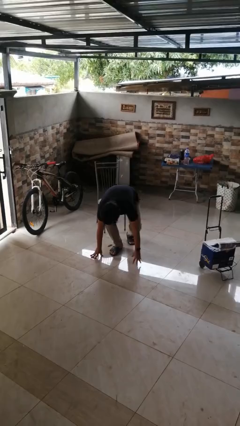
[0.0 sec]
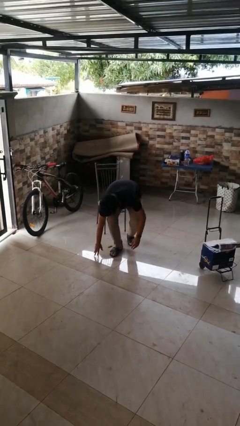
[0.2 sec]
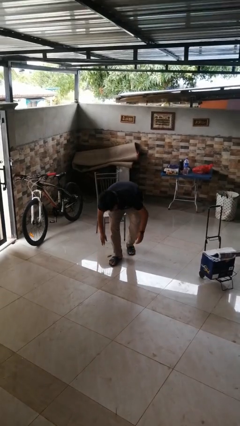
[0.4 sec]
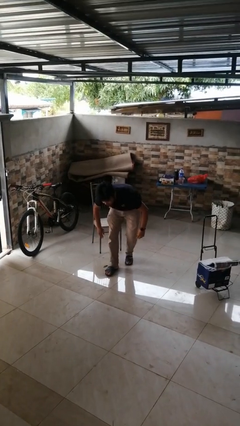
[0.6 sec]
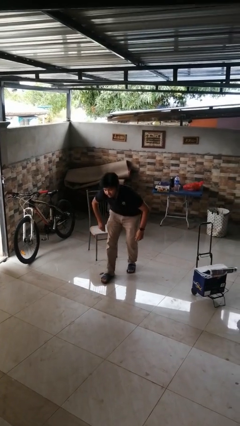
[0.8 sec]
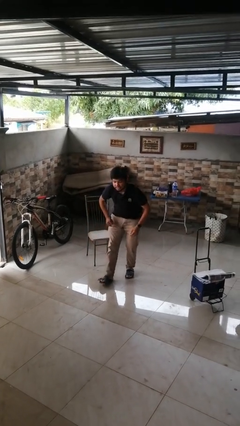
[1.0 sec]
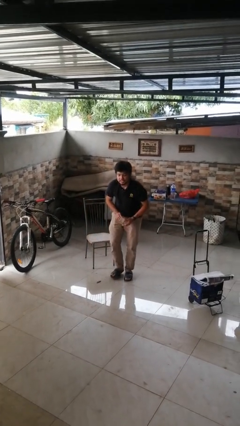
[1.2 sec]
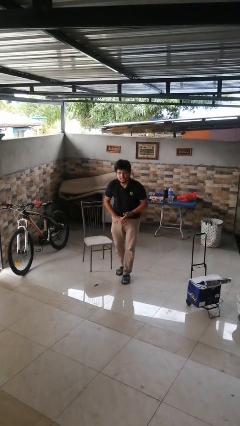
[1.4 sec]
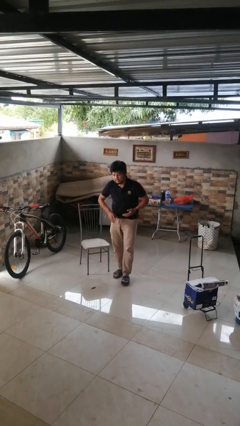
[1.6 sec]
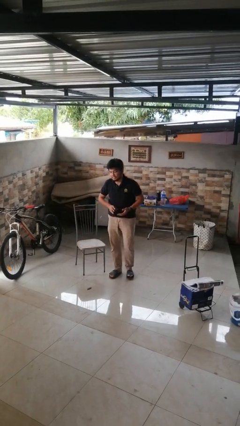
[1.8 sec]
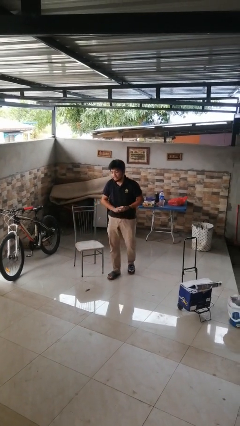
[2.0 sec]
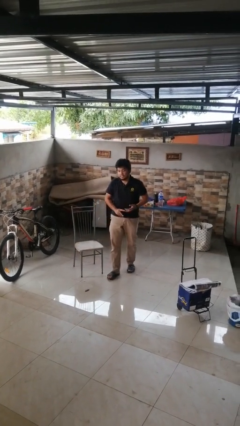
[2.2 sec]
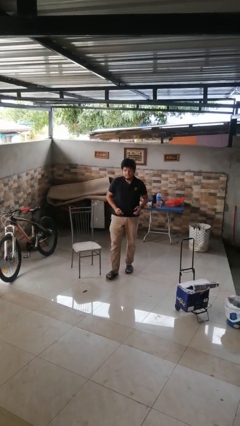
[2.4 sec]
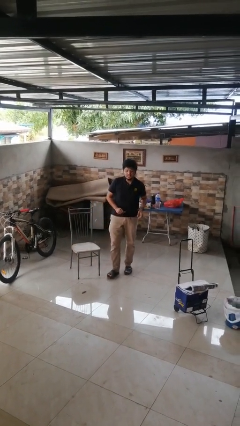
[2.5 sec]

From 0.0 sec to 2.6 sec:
person stands up from floor

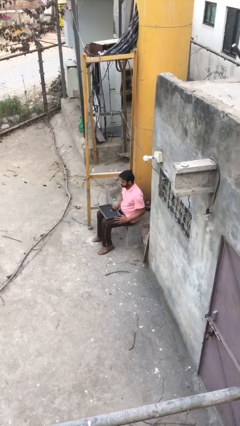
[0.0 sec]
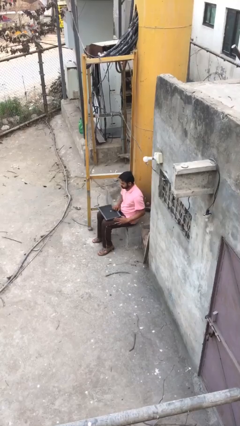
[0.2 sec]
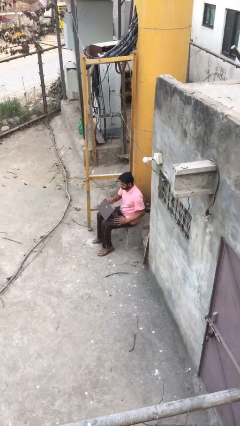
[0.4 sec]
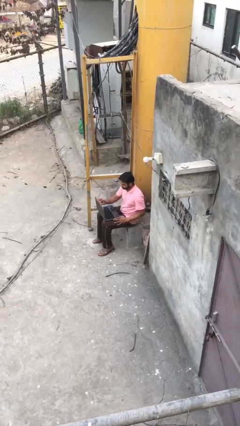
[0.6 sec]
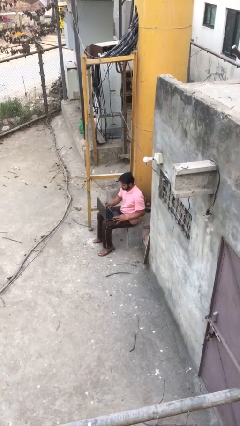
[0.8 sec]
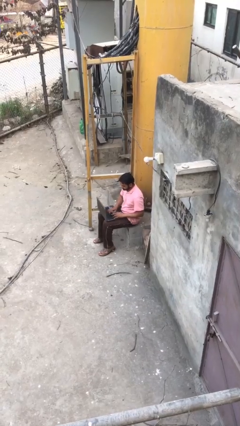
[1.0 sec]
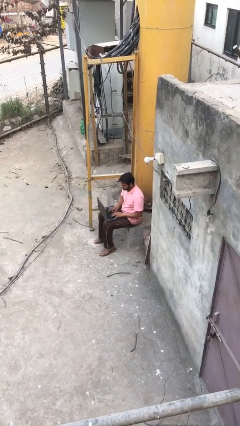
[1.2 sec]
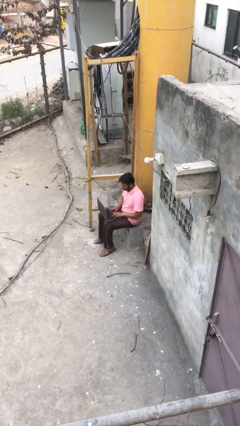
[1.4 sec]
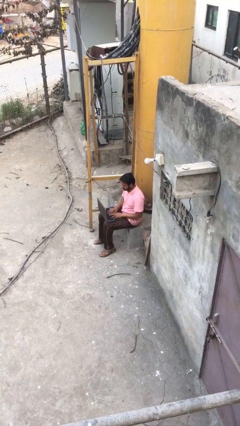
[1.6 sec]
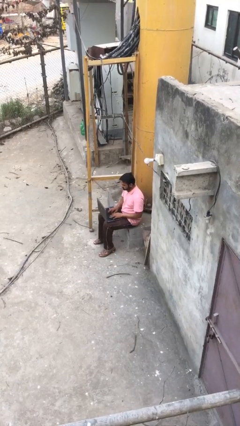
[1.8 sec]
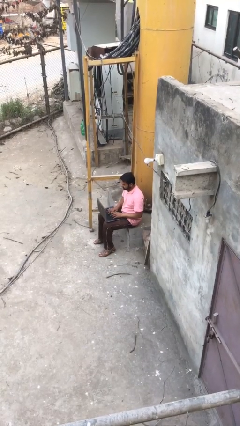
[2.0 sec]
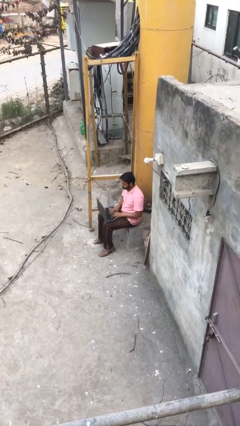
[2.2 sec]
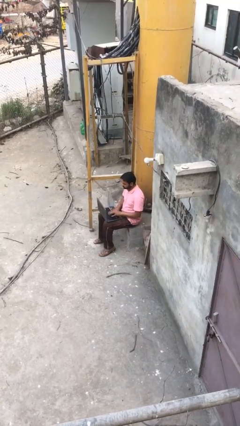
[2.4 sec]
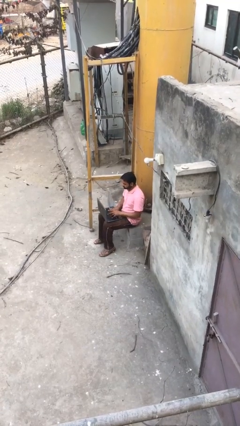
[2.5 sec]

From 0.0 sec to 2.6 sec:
person interacts with laptop

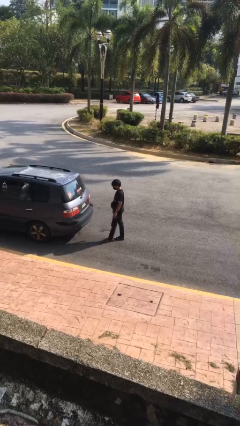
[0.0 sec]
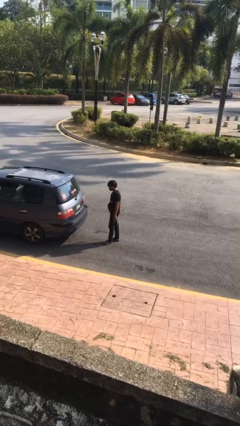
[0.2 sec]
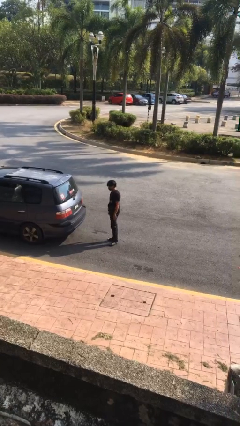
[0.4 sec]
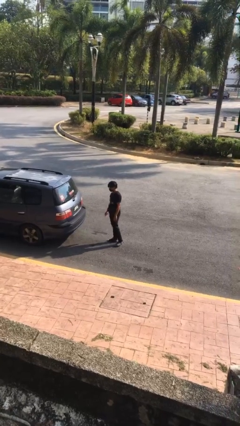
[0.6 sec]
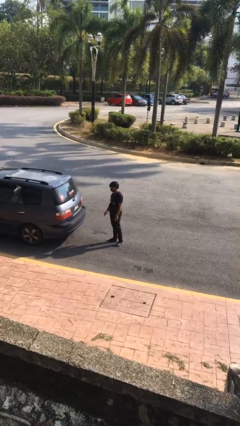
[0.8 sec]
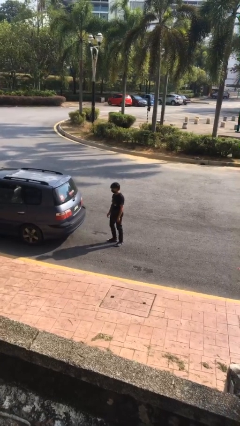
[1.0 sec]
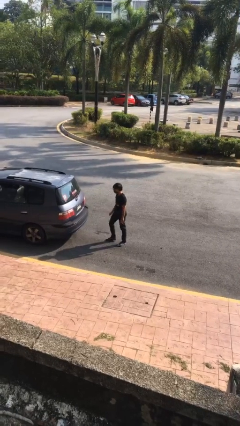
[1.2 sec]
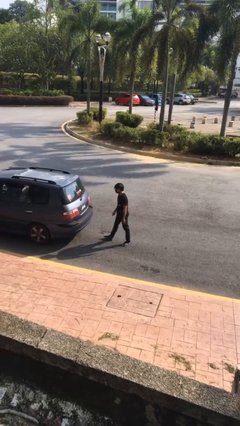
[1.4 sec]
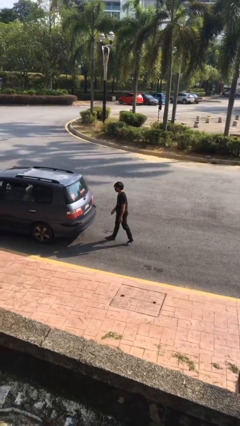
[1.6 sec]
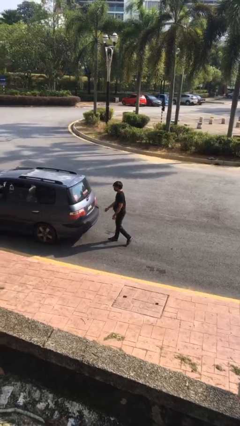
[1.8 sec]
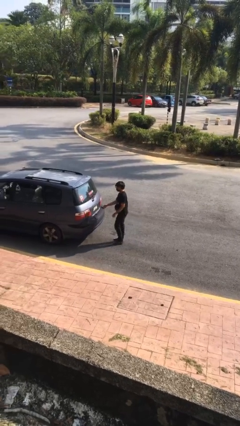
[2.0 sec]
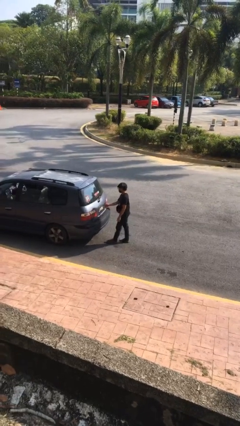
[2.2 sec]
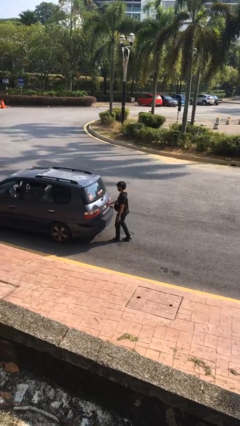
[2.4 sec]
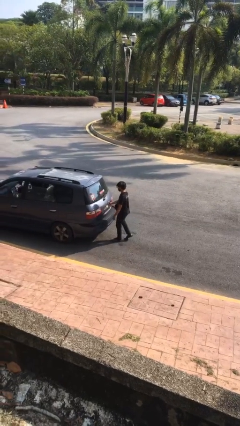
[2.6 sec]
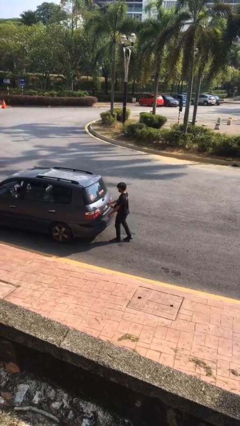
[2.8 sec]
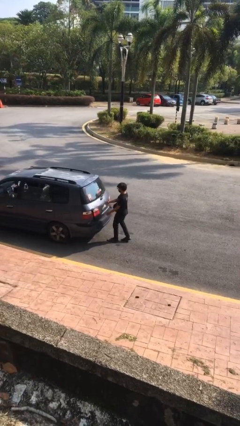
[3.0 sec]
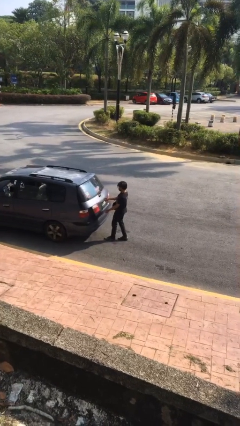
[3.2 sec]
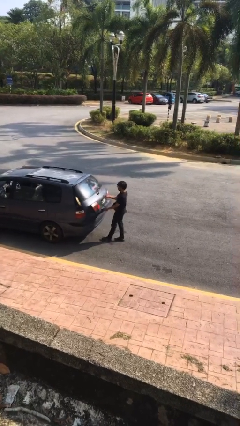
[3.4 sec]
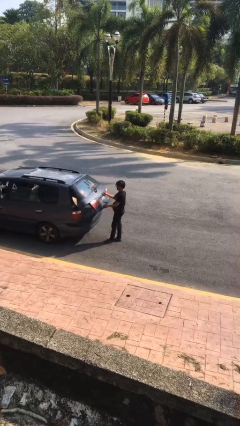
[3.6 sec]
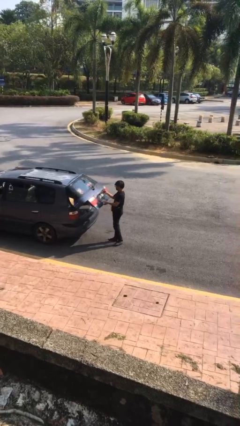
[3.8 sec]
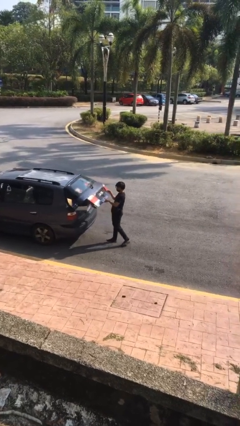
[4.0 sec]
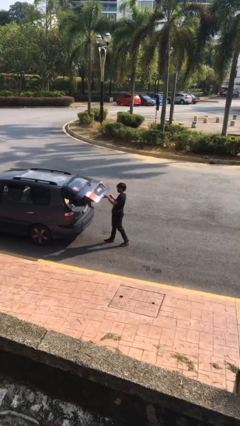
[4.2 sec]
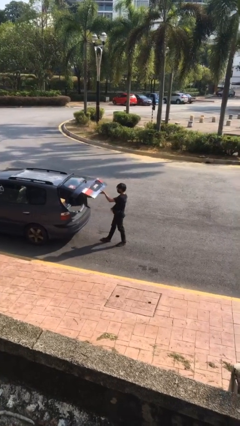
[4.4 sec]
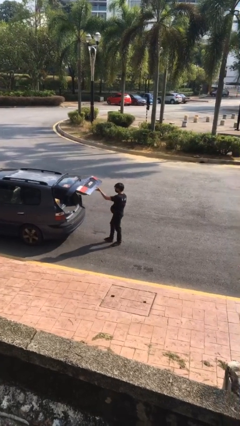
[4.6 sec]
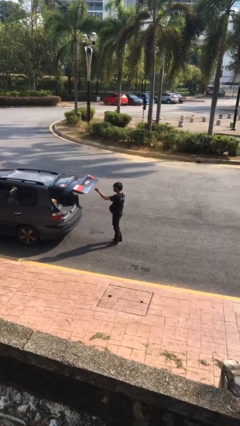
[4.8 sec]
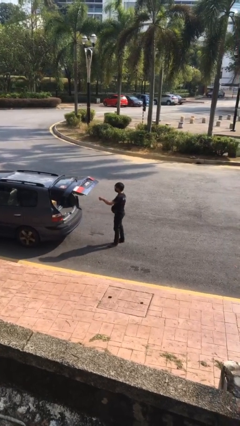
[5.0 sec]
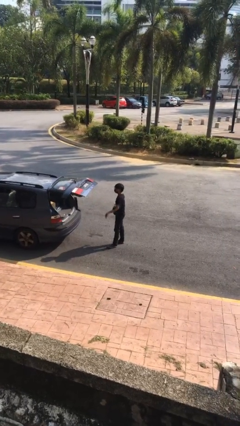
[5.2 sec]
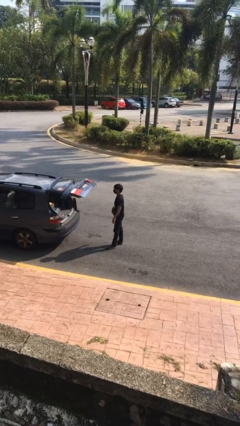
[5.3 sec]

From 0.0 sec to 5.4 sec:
person opens car trunk

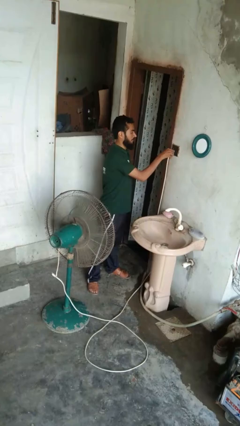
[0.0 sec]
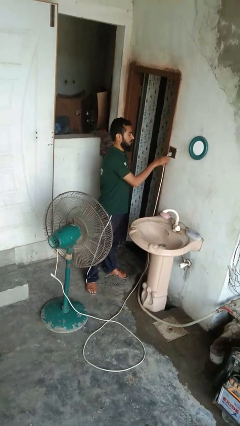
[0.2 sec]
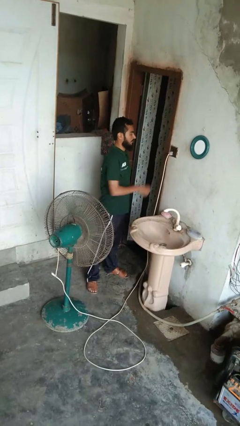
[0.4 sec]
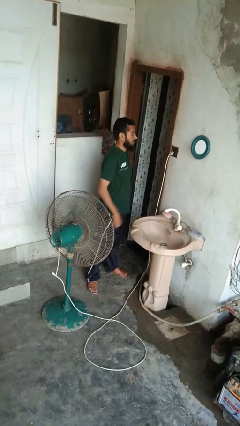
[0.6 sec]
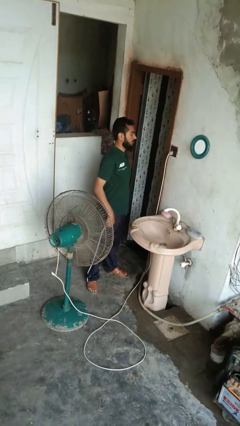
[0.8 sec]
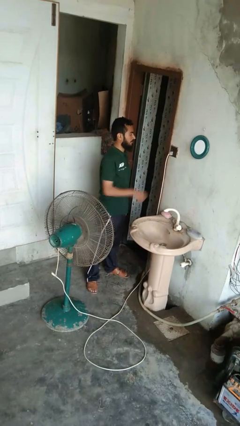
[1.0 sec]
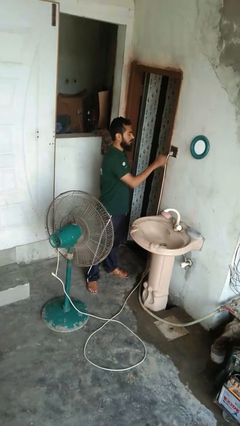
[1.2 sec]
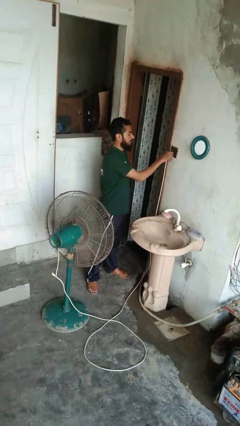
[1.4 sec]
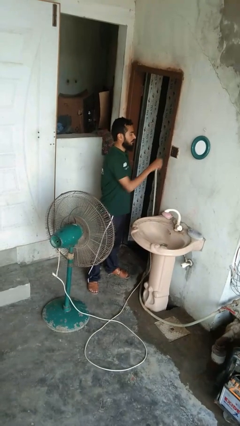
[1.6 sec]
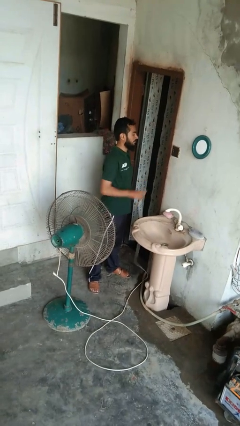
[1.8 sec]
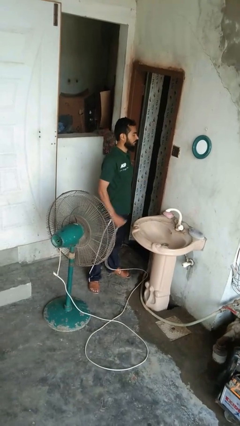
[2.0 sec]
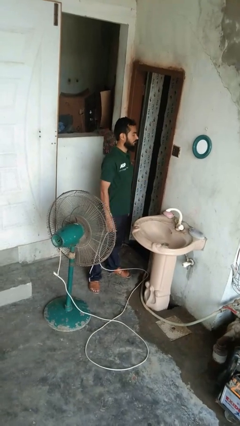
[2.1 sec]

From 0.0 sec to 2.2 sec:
person turns off fan

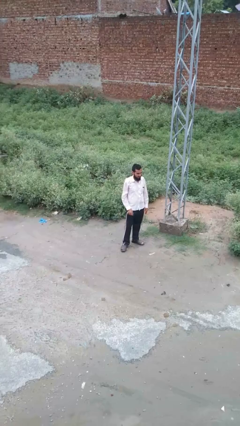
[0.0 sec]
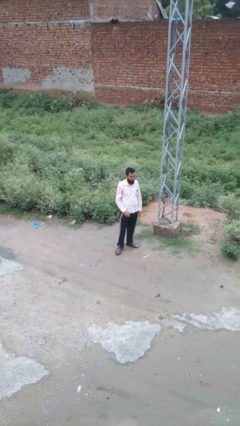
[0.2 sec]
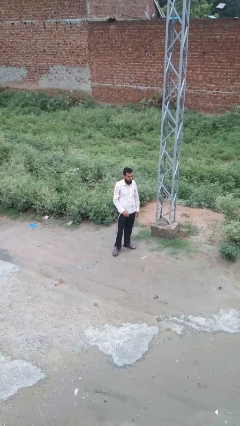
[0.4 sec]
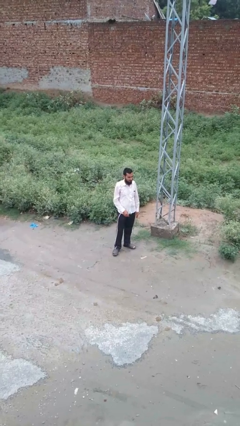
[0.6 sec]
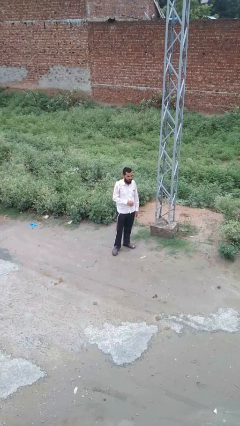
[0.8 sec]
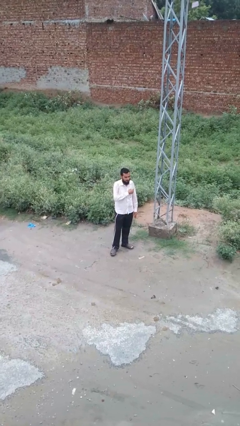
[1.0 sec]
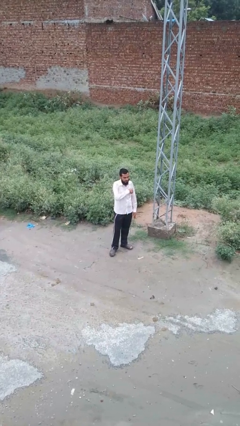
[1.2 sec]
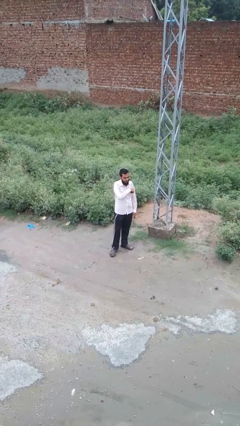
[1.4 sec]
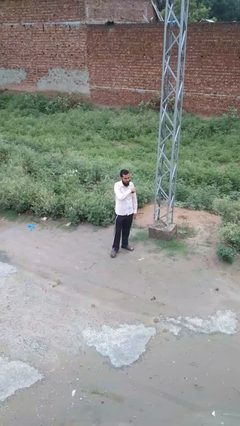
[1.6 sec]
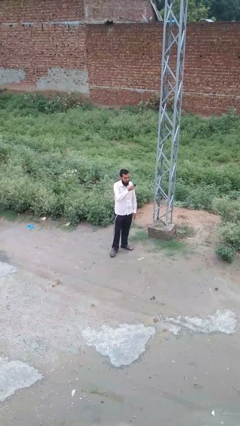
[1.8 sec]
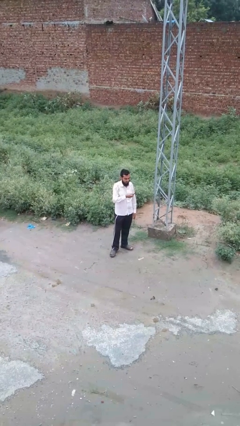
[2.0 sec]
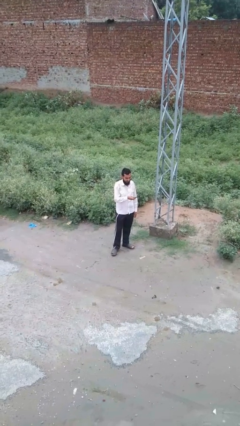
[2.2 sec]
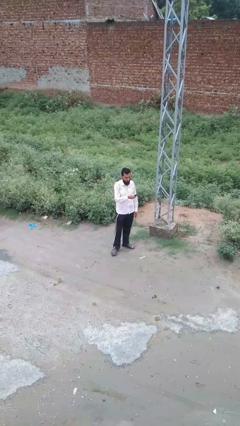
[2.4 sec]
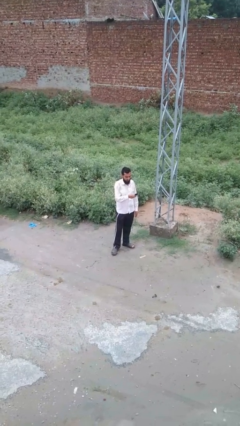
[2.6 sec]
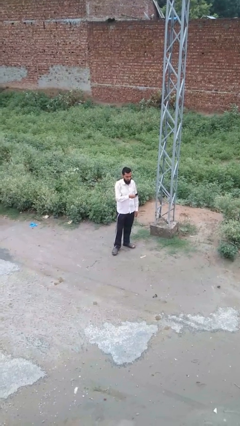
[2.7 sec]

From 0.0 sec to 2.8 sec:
person takes phone from pocket

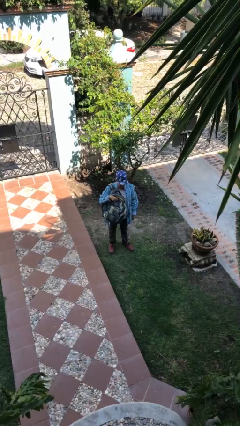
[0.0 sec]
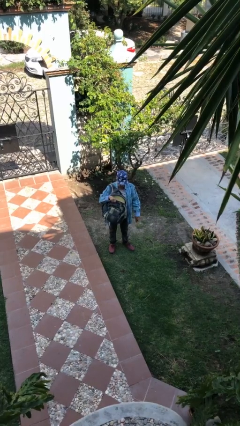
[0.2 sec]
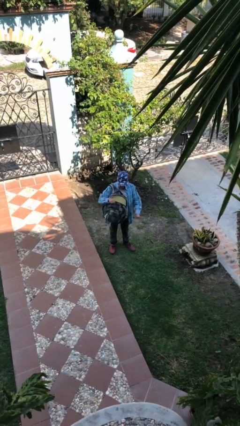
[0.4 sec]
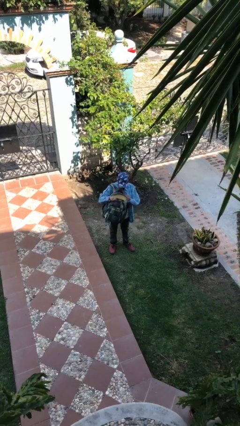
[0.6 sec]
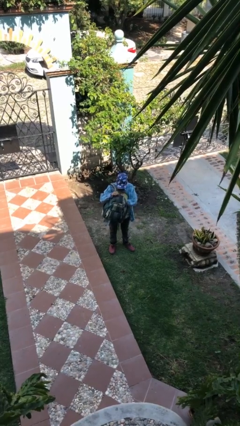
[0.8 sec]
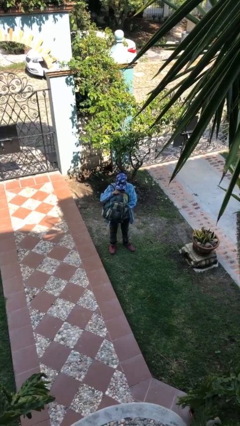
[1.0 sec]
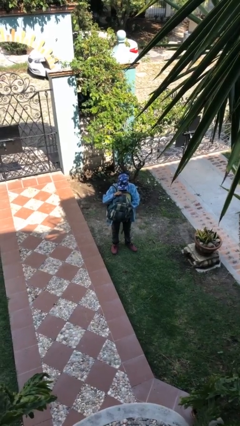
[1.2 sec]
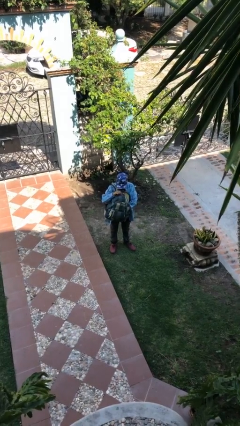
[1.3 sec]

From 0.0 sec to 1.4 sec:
person searches in backpack
